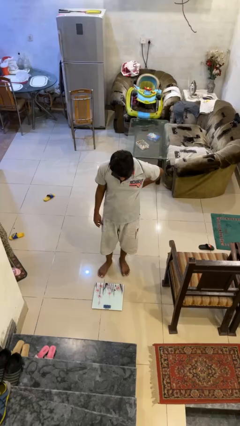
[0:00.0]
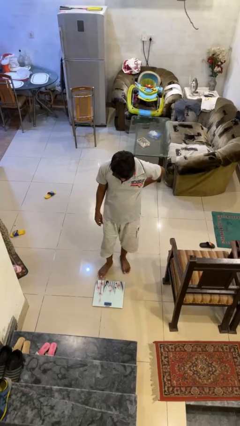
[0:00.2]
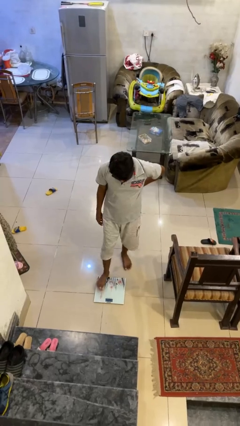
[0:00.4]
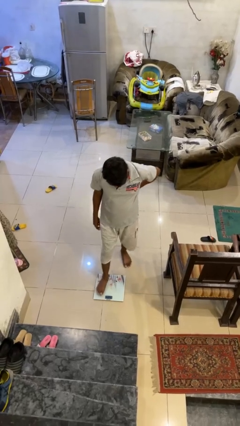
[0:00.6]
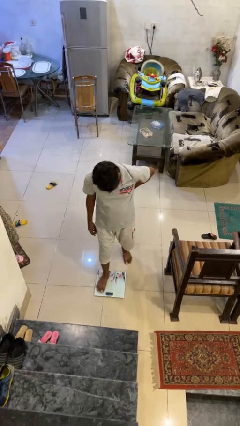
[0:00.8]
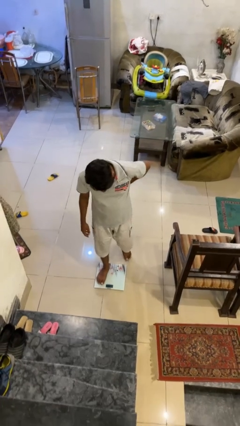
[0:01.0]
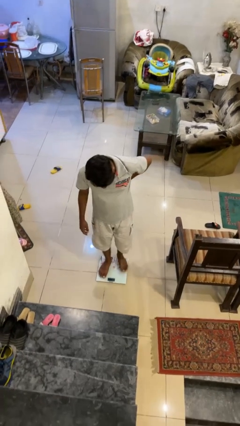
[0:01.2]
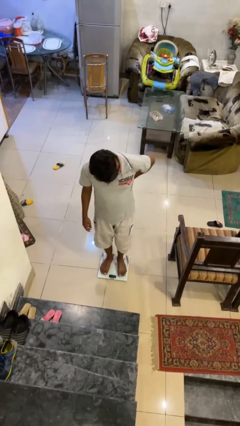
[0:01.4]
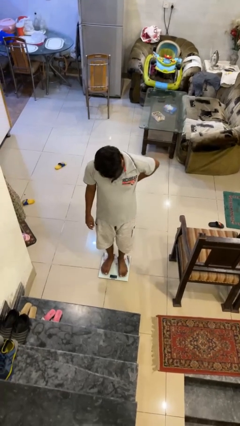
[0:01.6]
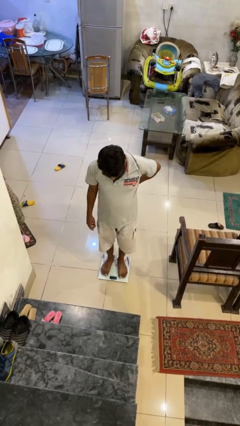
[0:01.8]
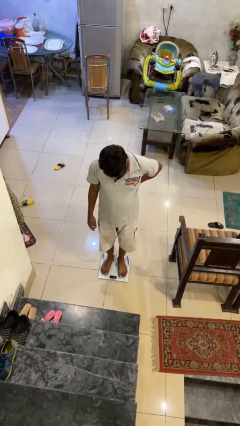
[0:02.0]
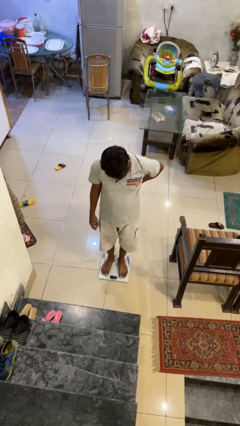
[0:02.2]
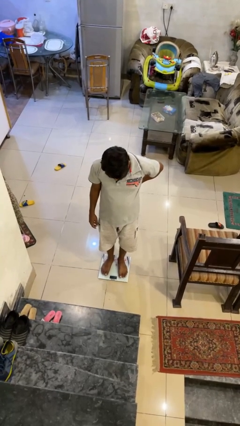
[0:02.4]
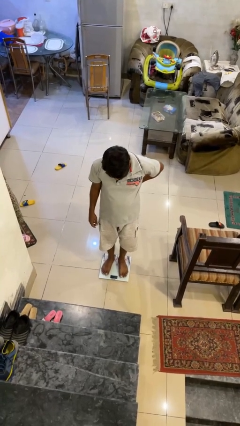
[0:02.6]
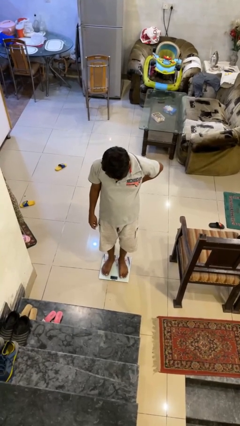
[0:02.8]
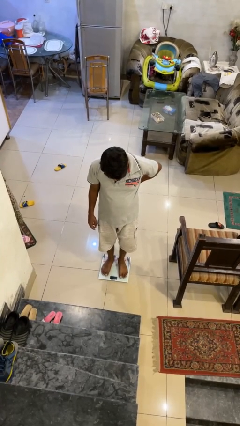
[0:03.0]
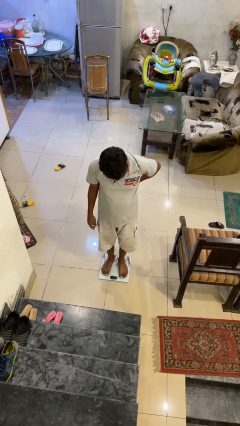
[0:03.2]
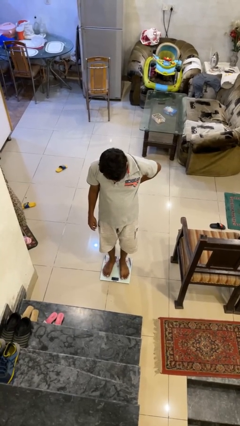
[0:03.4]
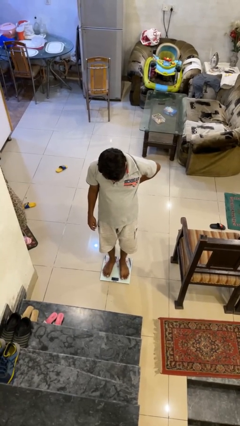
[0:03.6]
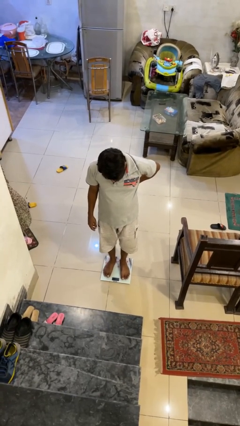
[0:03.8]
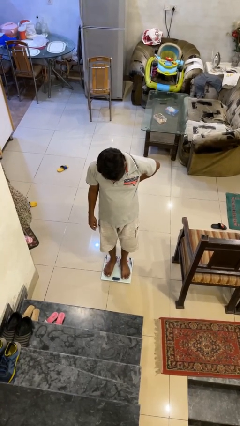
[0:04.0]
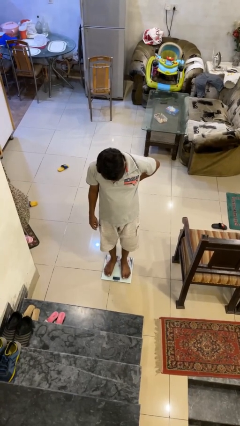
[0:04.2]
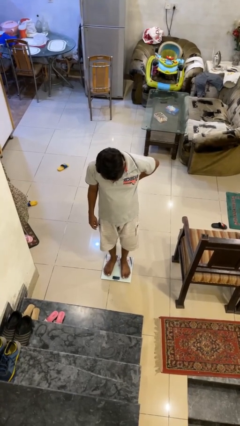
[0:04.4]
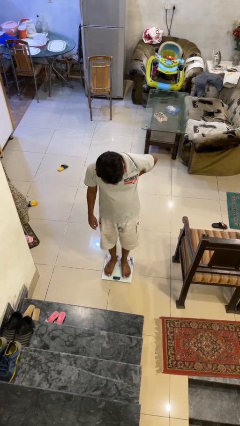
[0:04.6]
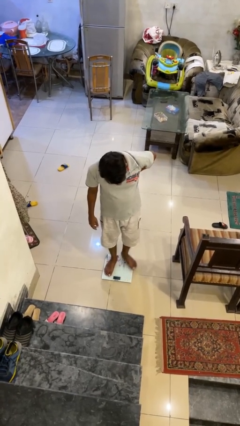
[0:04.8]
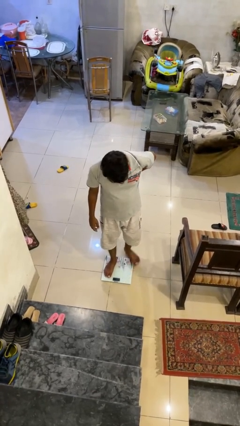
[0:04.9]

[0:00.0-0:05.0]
person uses bodyweight scale

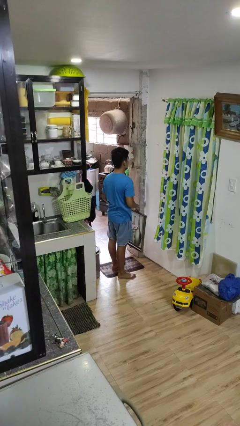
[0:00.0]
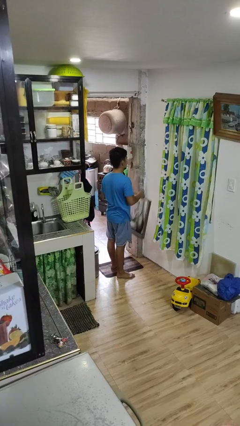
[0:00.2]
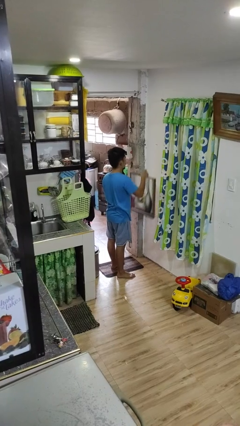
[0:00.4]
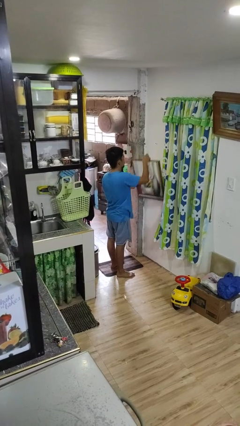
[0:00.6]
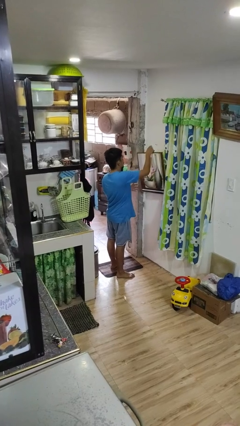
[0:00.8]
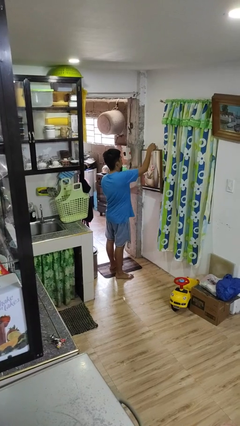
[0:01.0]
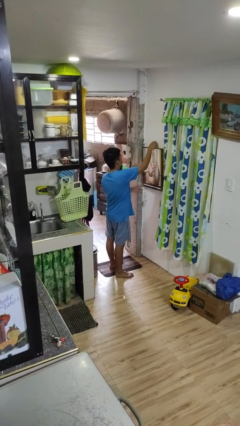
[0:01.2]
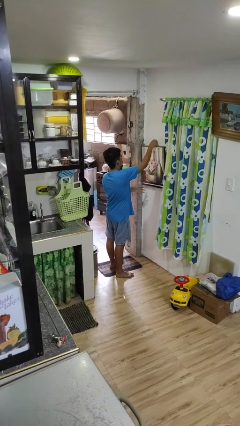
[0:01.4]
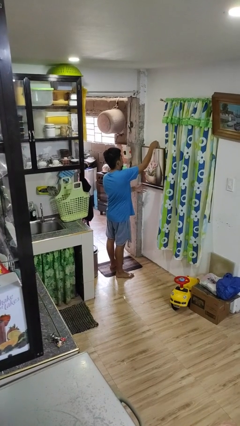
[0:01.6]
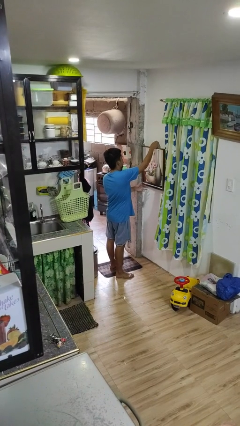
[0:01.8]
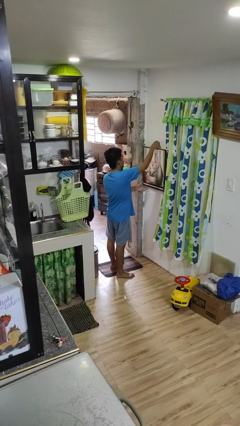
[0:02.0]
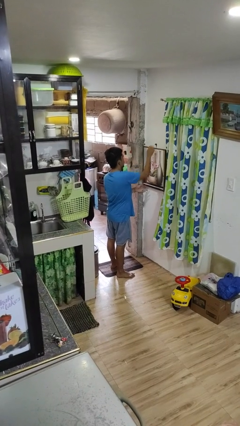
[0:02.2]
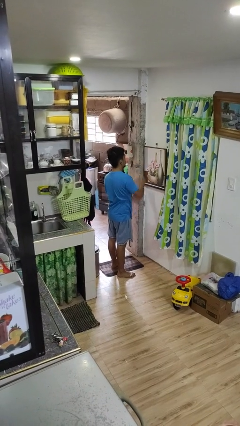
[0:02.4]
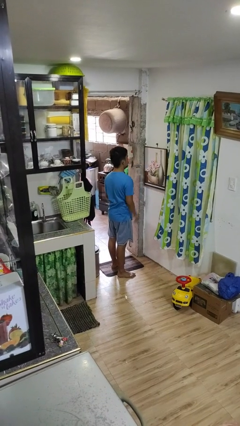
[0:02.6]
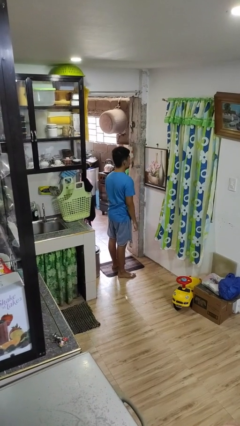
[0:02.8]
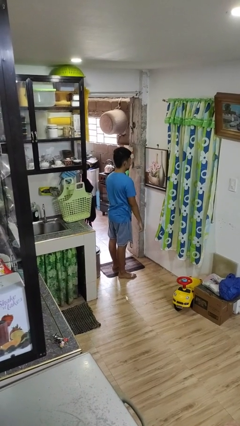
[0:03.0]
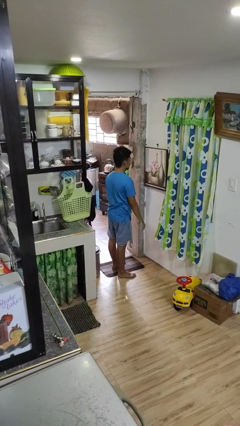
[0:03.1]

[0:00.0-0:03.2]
person puts up picture frame

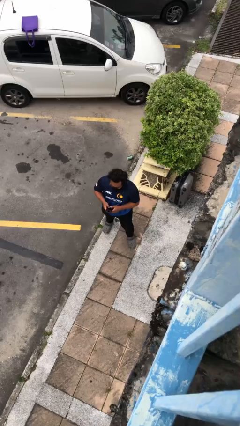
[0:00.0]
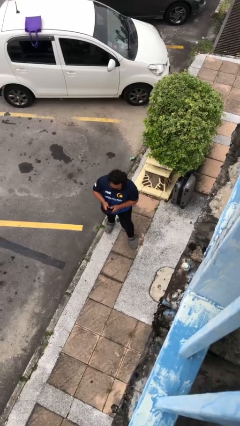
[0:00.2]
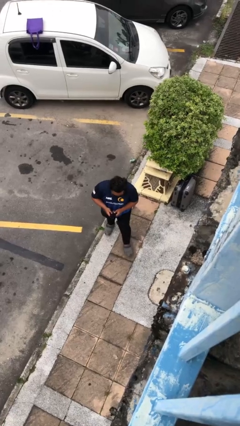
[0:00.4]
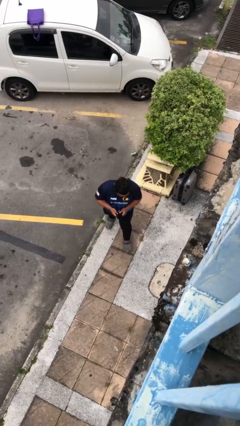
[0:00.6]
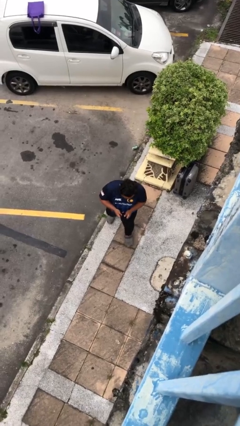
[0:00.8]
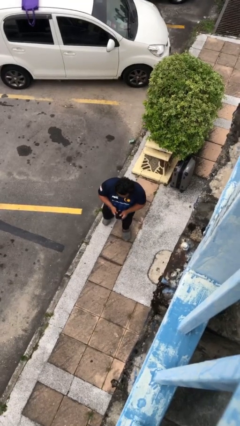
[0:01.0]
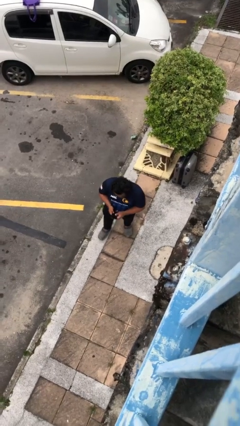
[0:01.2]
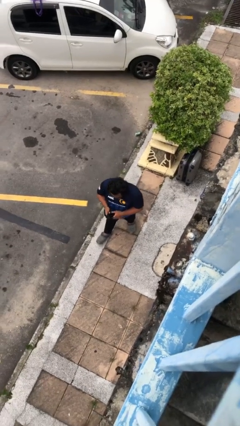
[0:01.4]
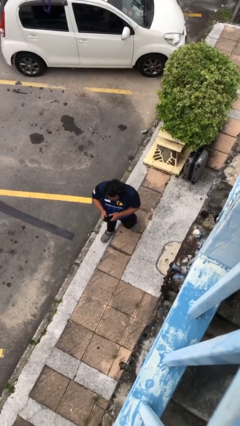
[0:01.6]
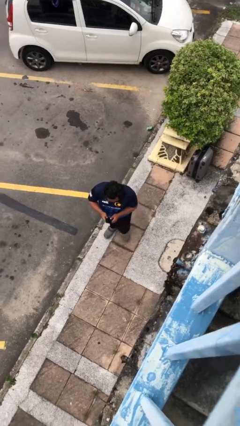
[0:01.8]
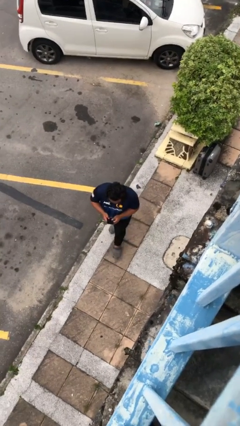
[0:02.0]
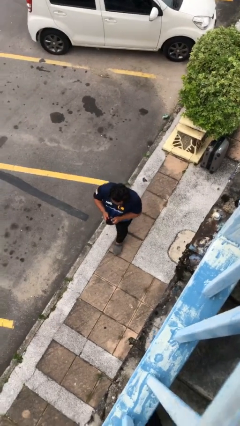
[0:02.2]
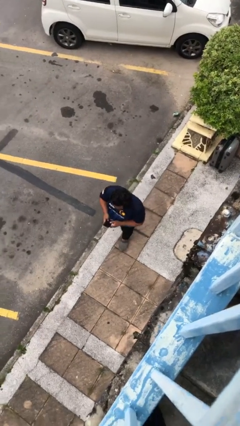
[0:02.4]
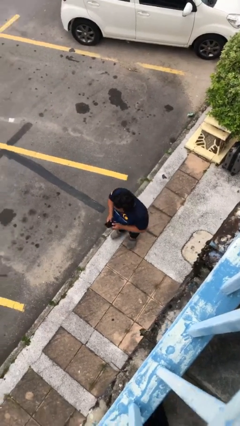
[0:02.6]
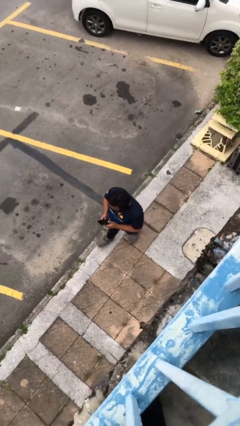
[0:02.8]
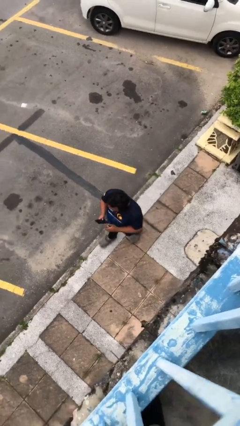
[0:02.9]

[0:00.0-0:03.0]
person texts on phone

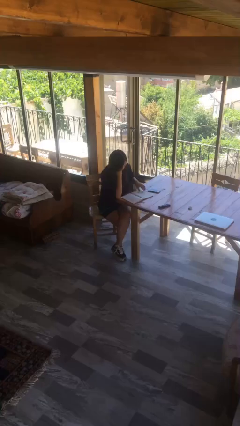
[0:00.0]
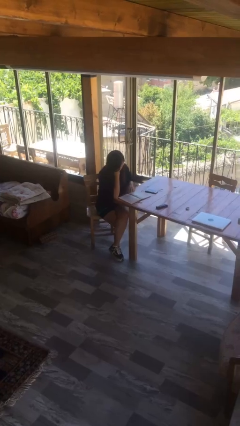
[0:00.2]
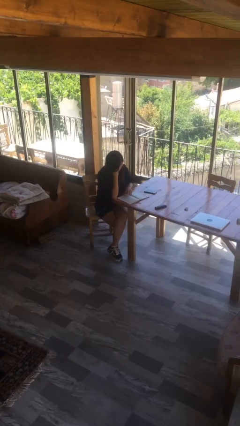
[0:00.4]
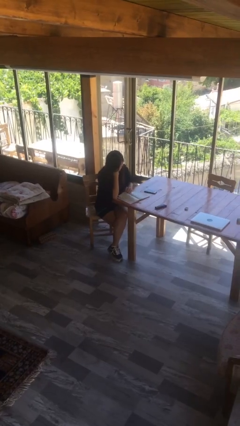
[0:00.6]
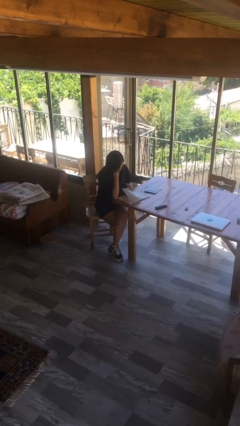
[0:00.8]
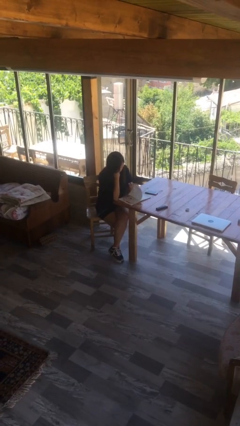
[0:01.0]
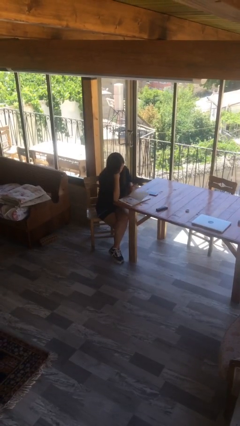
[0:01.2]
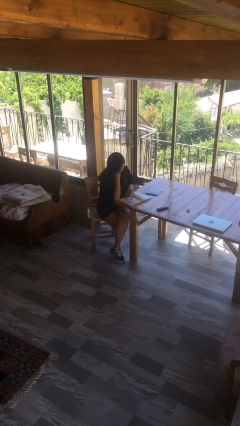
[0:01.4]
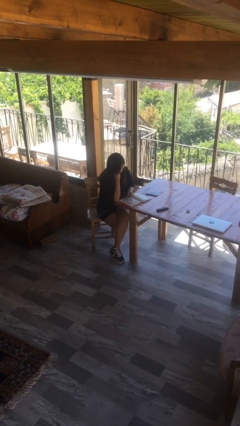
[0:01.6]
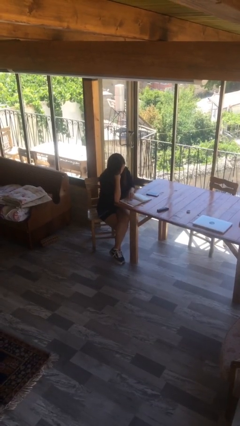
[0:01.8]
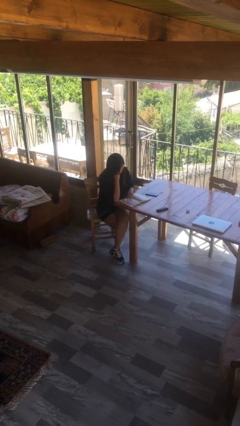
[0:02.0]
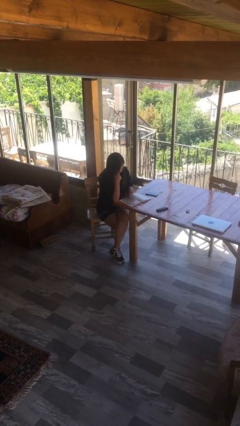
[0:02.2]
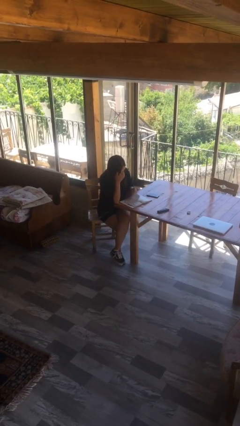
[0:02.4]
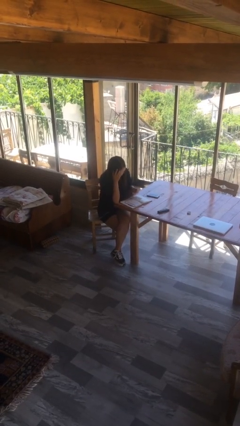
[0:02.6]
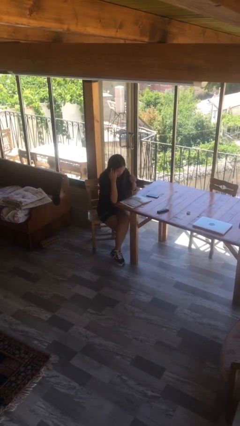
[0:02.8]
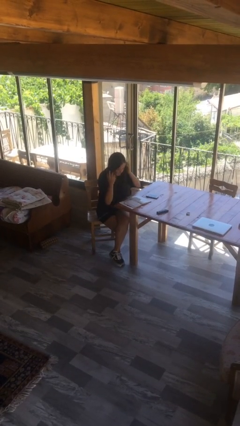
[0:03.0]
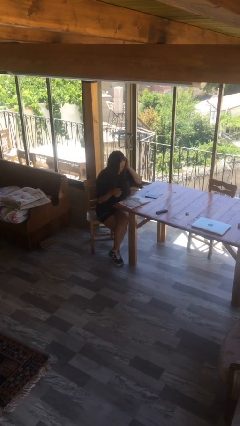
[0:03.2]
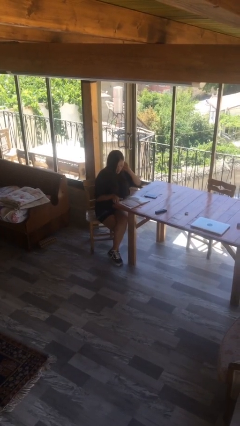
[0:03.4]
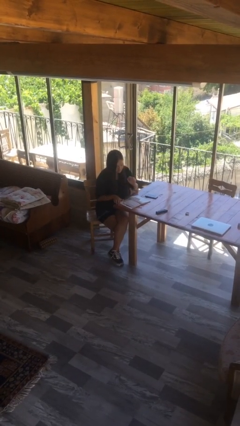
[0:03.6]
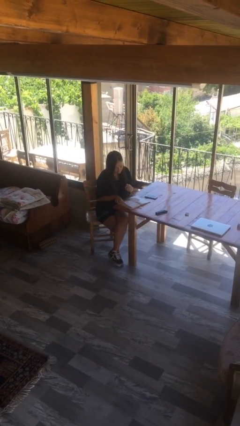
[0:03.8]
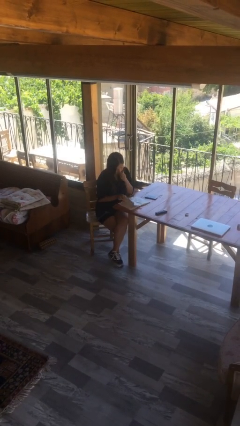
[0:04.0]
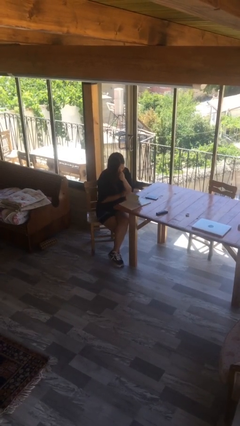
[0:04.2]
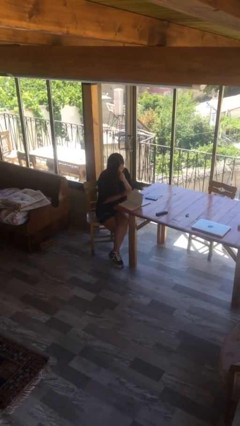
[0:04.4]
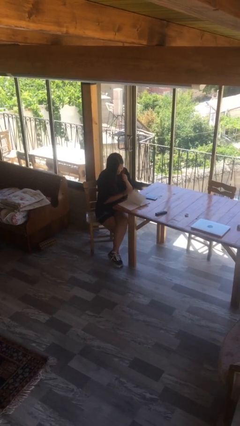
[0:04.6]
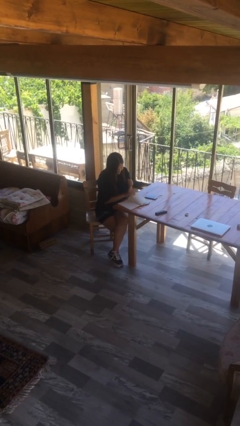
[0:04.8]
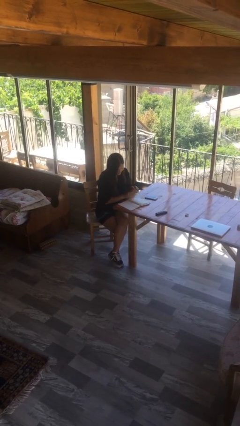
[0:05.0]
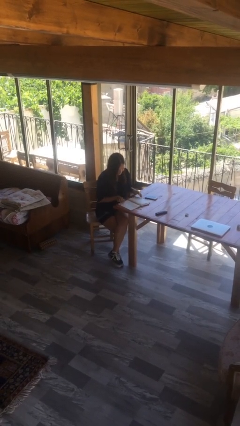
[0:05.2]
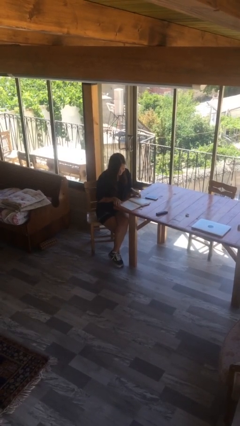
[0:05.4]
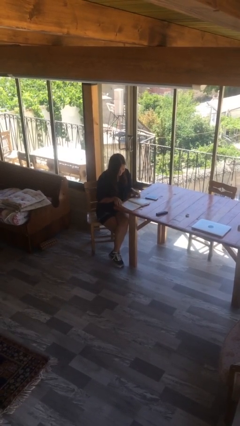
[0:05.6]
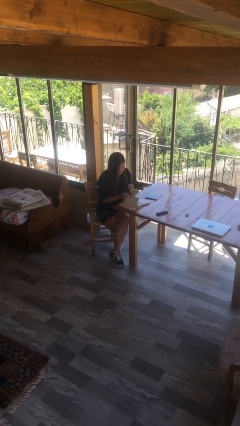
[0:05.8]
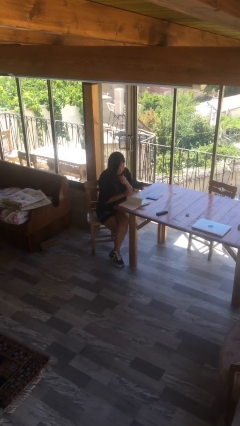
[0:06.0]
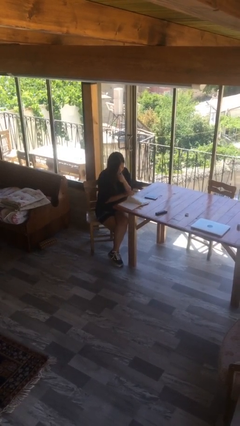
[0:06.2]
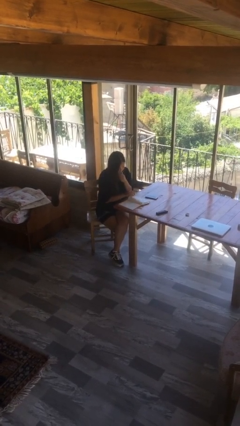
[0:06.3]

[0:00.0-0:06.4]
person reads document

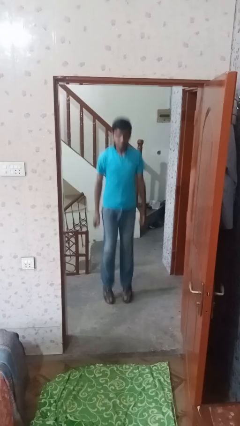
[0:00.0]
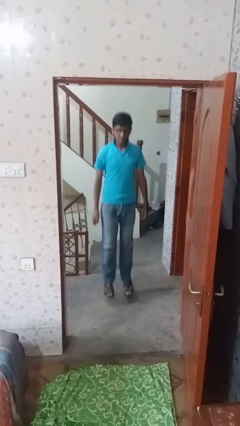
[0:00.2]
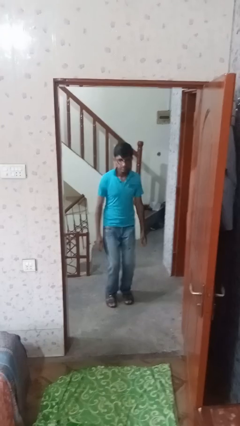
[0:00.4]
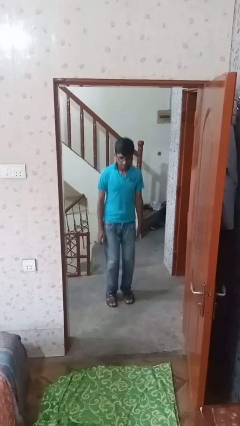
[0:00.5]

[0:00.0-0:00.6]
person jumps
